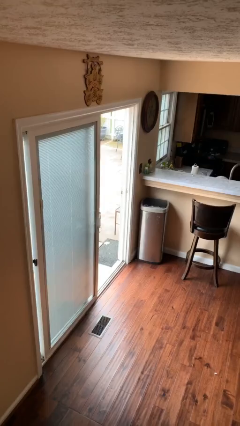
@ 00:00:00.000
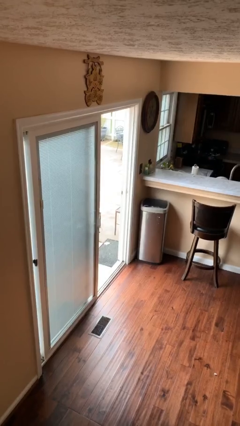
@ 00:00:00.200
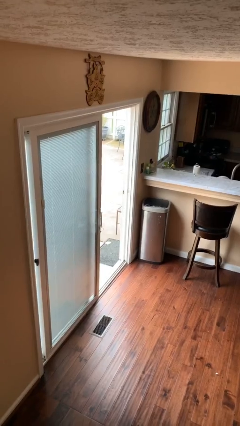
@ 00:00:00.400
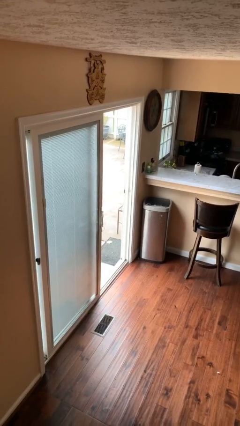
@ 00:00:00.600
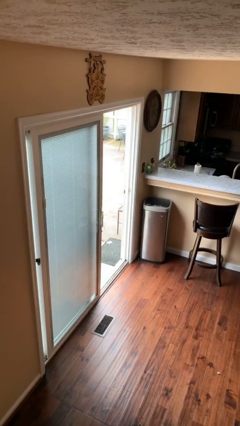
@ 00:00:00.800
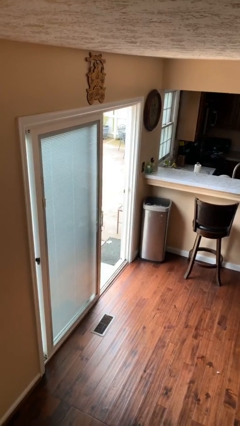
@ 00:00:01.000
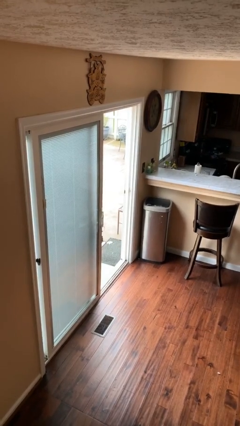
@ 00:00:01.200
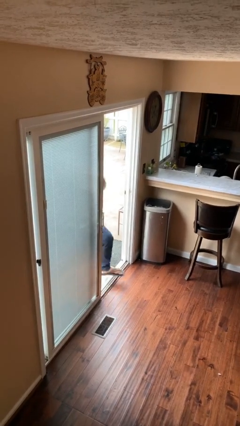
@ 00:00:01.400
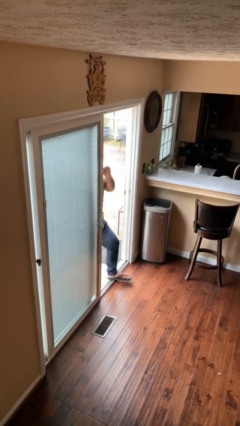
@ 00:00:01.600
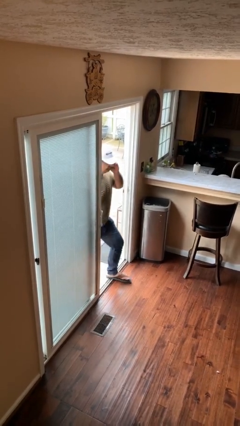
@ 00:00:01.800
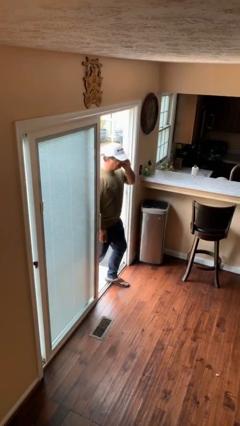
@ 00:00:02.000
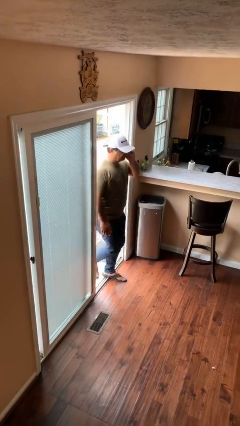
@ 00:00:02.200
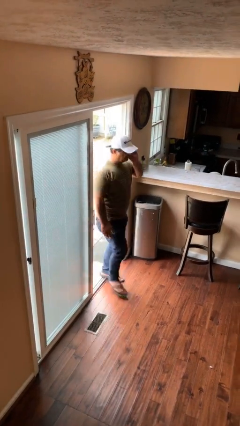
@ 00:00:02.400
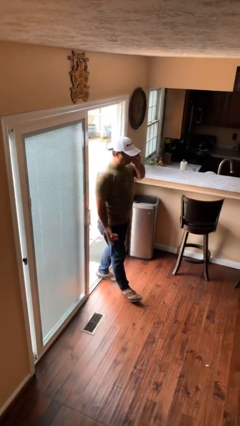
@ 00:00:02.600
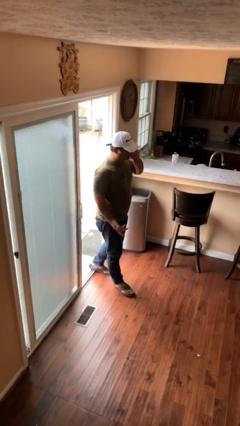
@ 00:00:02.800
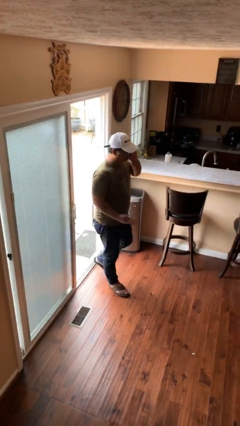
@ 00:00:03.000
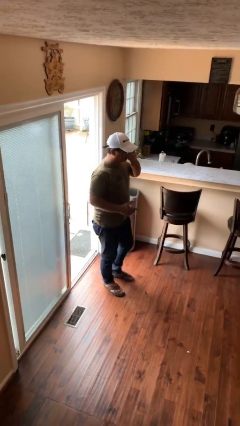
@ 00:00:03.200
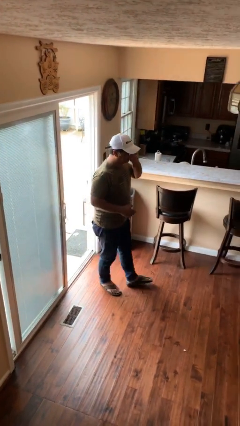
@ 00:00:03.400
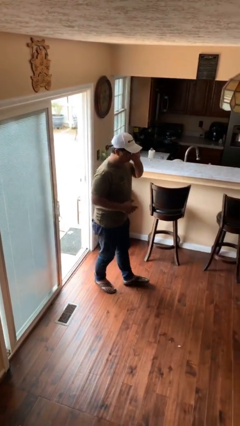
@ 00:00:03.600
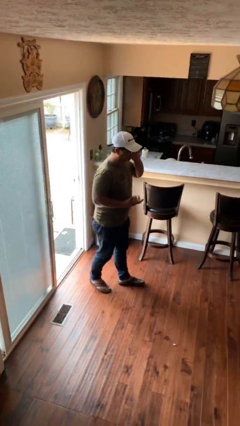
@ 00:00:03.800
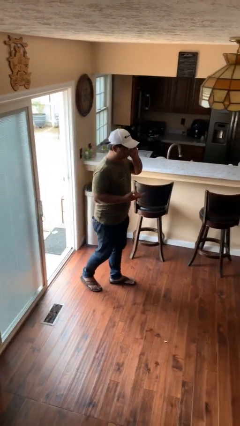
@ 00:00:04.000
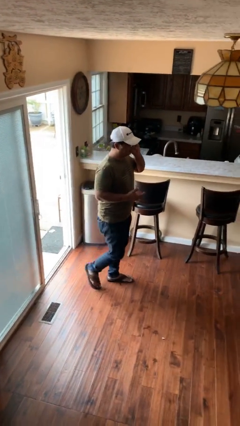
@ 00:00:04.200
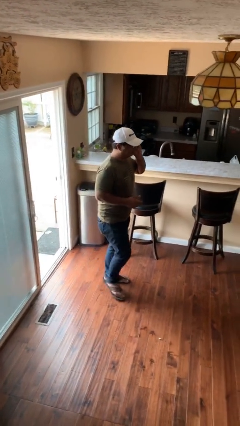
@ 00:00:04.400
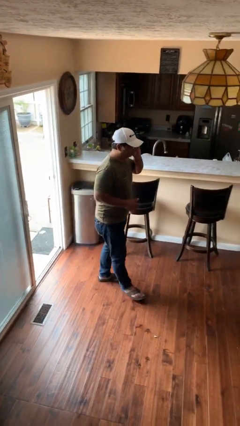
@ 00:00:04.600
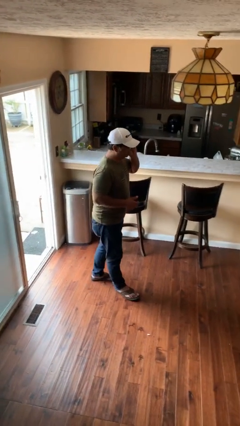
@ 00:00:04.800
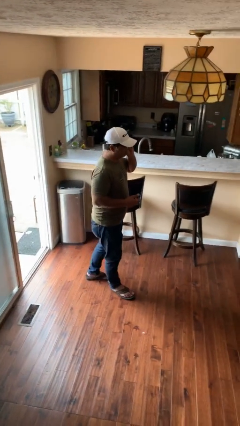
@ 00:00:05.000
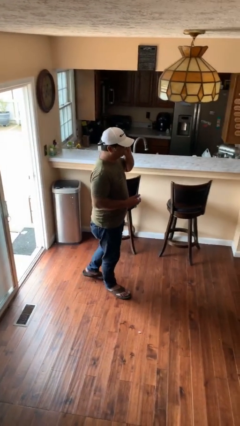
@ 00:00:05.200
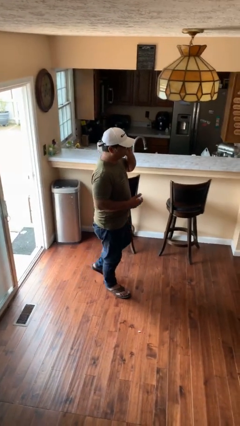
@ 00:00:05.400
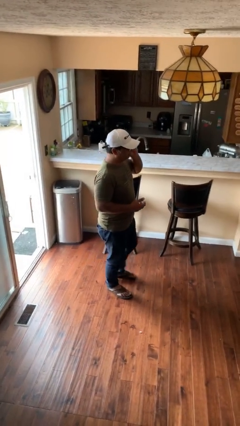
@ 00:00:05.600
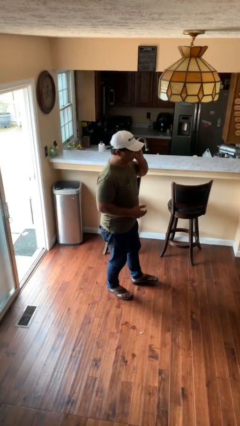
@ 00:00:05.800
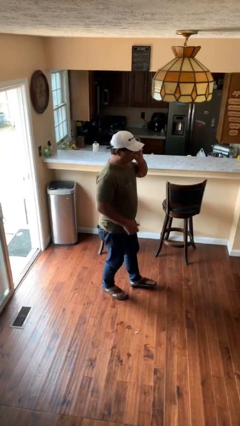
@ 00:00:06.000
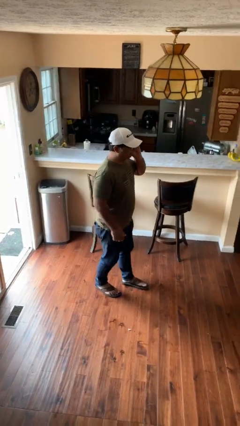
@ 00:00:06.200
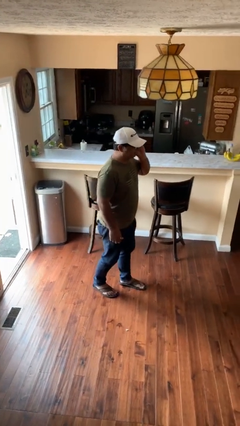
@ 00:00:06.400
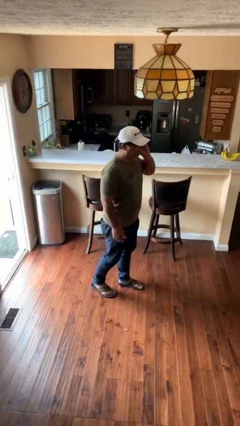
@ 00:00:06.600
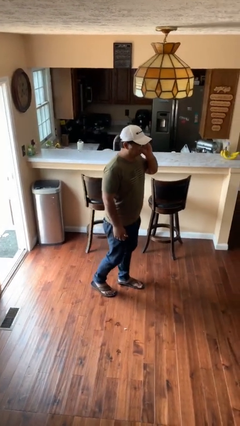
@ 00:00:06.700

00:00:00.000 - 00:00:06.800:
person enters scene through structure

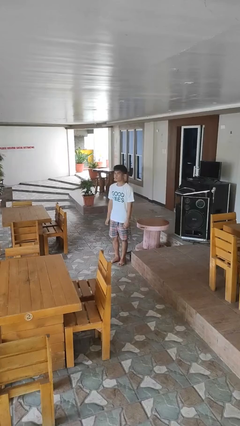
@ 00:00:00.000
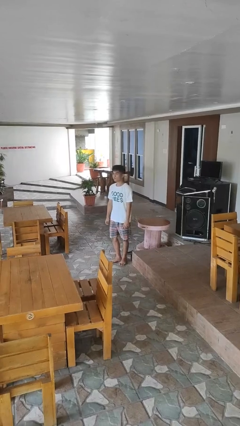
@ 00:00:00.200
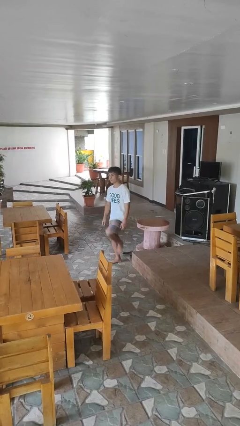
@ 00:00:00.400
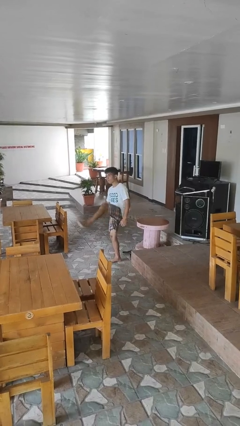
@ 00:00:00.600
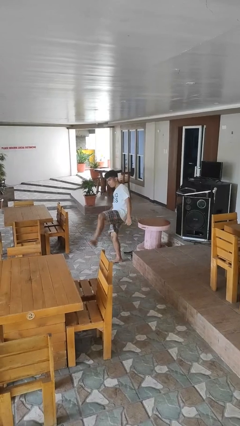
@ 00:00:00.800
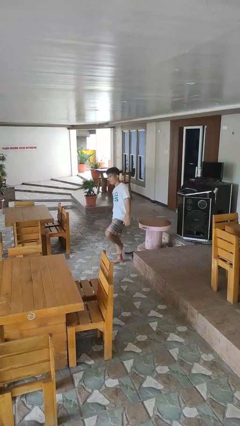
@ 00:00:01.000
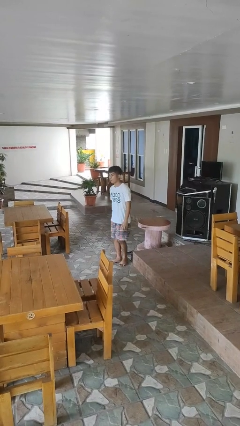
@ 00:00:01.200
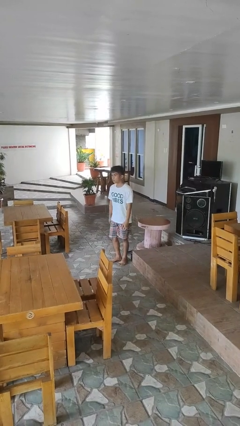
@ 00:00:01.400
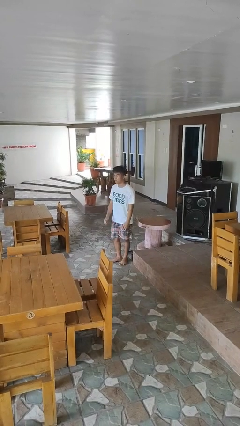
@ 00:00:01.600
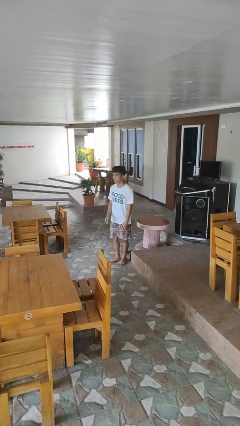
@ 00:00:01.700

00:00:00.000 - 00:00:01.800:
person karate kicks

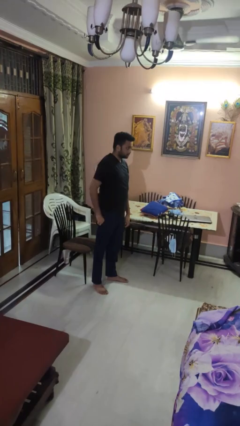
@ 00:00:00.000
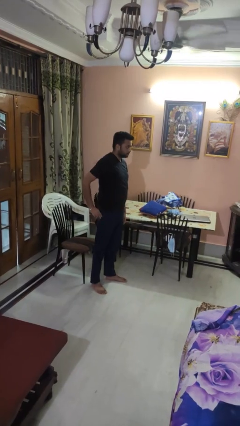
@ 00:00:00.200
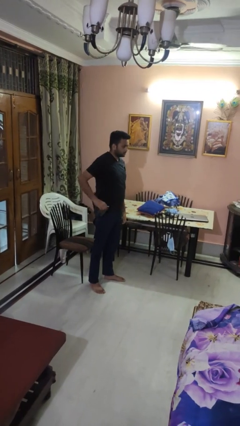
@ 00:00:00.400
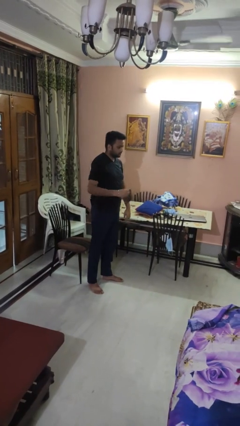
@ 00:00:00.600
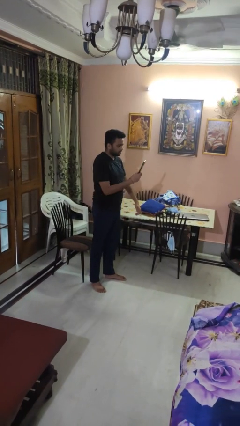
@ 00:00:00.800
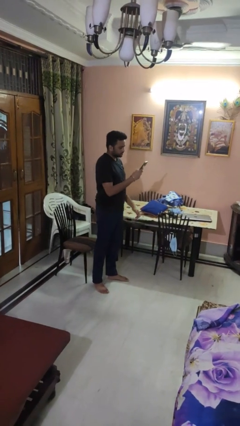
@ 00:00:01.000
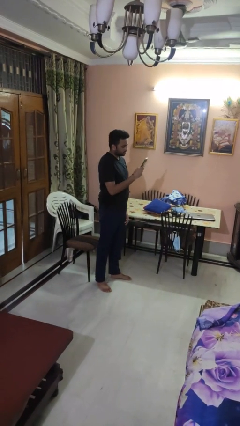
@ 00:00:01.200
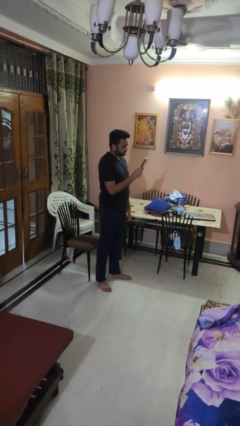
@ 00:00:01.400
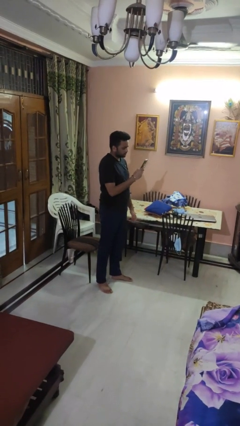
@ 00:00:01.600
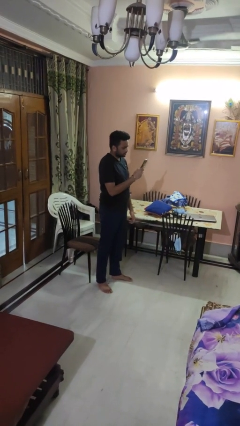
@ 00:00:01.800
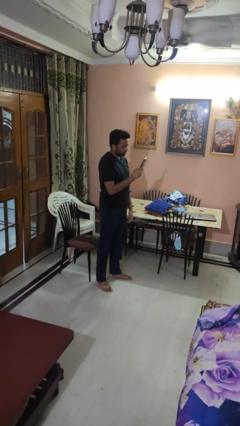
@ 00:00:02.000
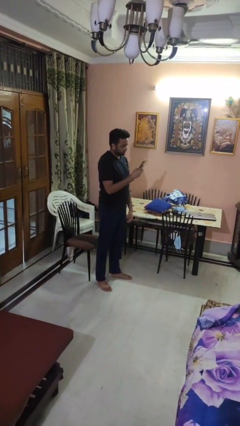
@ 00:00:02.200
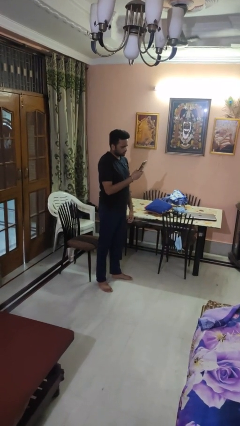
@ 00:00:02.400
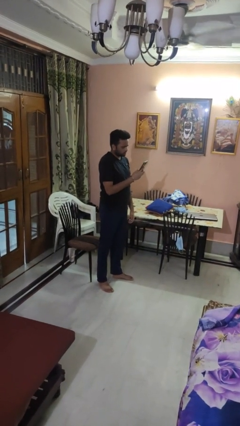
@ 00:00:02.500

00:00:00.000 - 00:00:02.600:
person takes phone from pocket

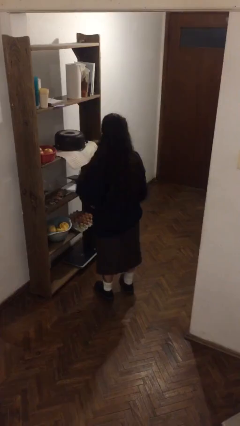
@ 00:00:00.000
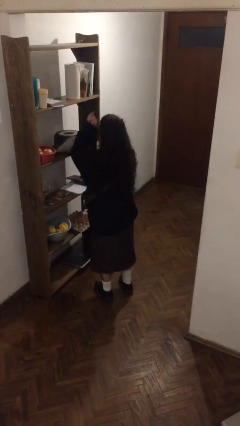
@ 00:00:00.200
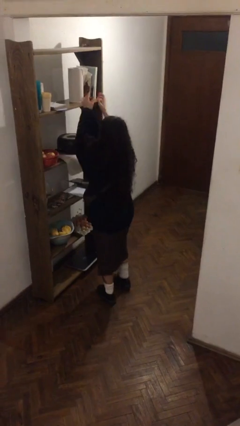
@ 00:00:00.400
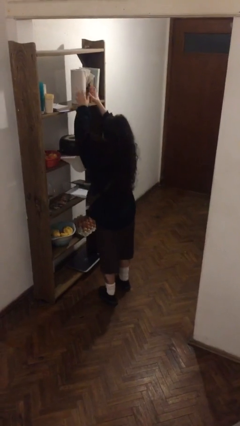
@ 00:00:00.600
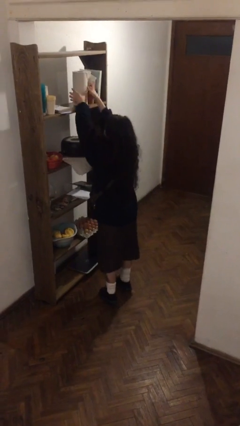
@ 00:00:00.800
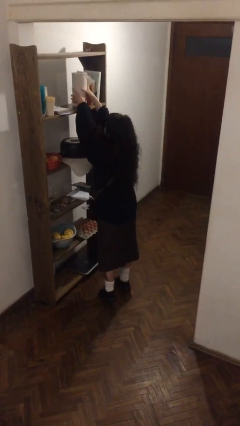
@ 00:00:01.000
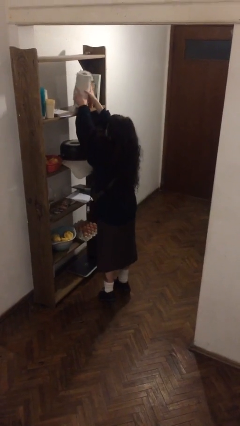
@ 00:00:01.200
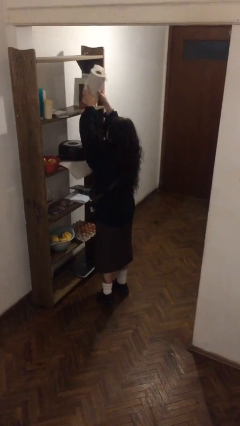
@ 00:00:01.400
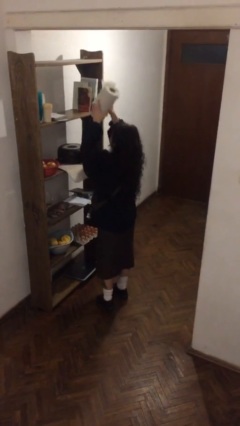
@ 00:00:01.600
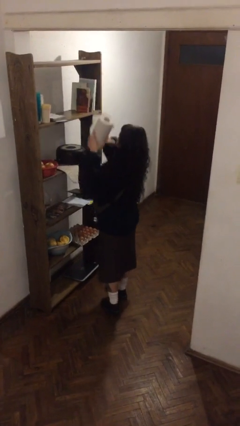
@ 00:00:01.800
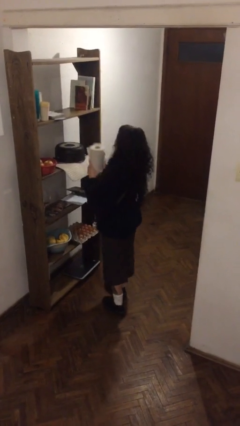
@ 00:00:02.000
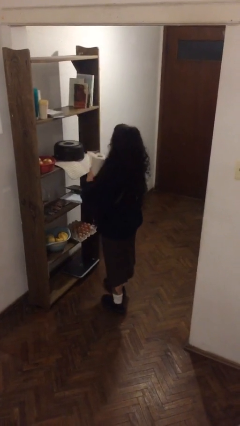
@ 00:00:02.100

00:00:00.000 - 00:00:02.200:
person picks up object from shelf

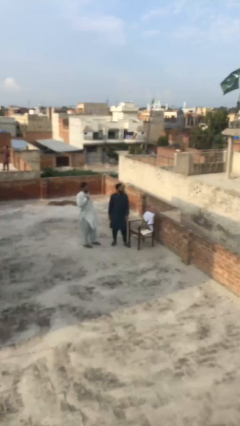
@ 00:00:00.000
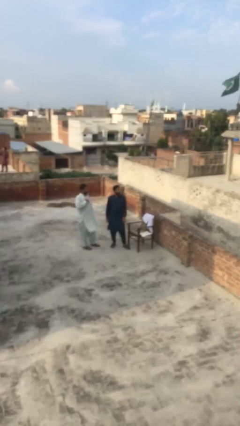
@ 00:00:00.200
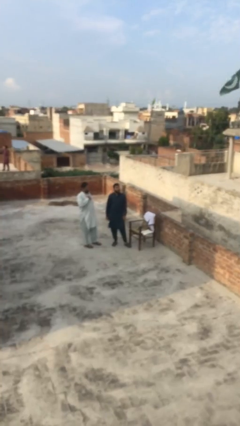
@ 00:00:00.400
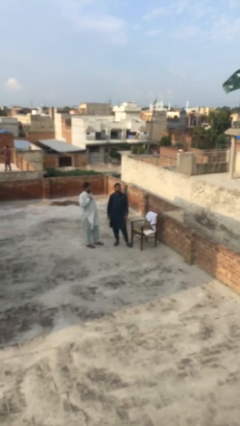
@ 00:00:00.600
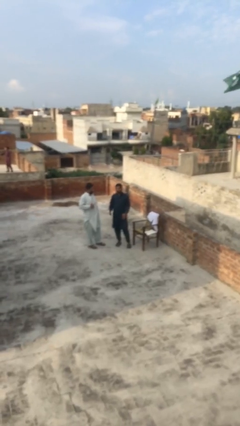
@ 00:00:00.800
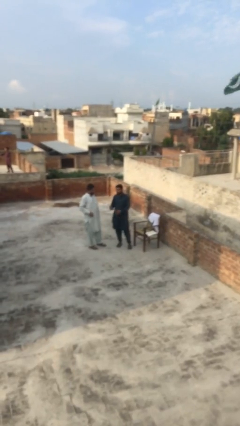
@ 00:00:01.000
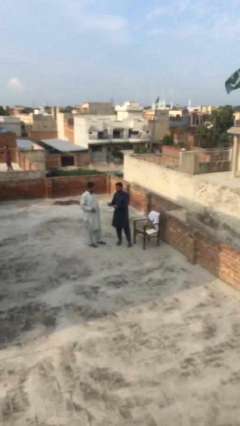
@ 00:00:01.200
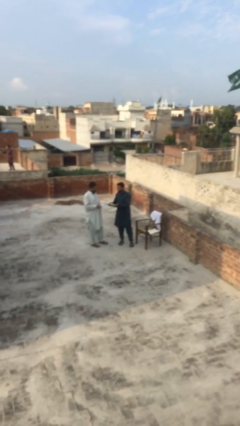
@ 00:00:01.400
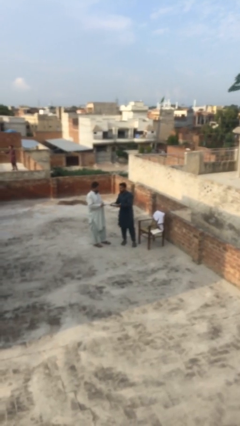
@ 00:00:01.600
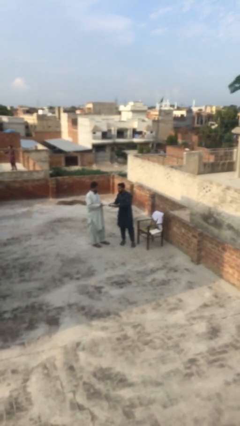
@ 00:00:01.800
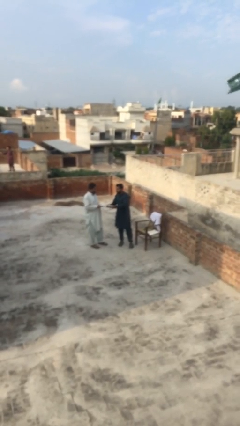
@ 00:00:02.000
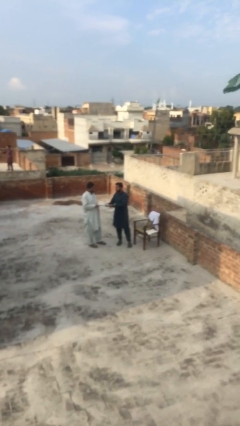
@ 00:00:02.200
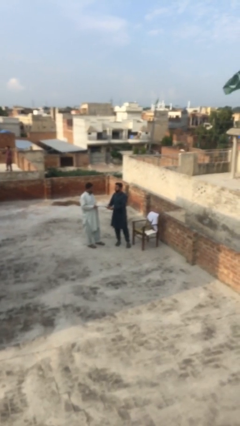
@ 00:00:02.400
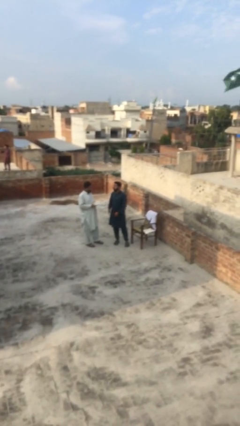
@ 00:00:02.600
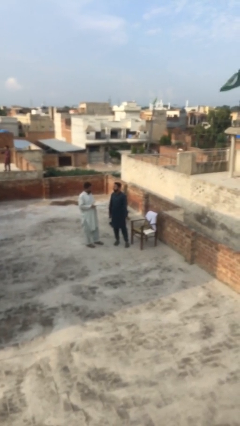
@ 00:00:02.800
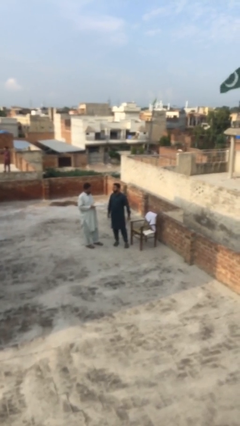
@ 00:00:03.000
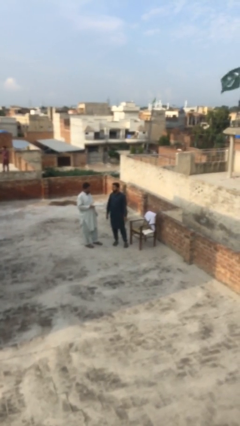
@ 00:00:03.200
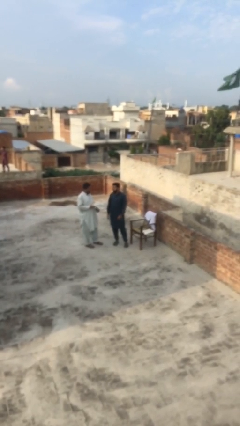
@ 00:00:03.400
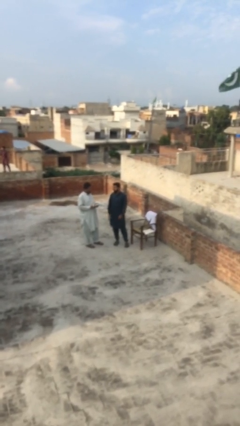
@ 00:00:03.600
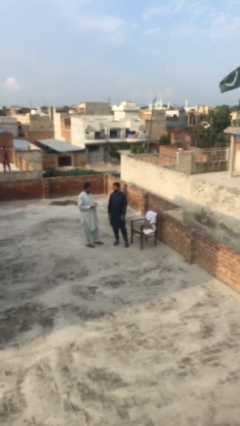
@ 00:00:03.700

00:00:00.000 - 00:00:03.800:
person transfers object to person
